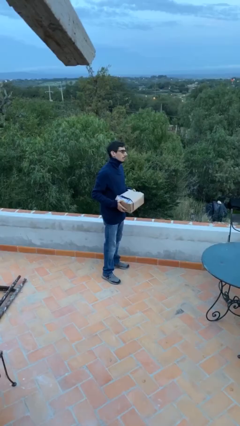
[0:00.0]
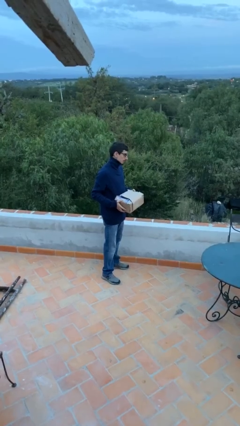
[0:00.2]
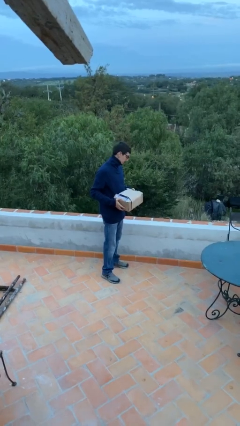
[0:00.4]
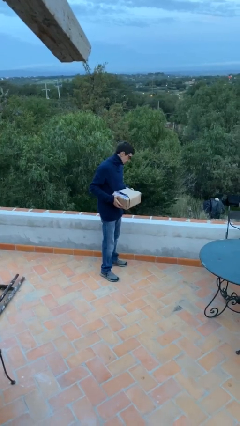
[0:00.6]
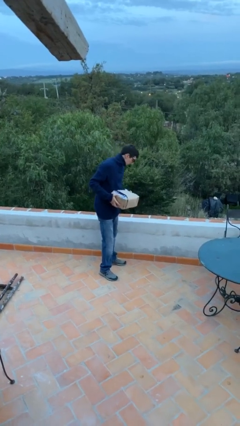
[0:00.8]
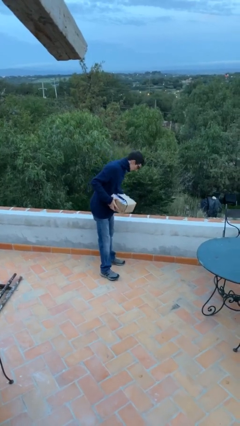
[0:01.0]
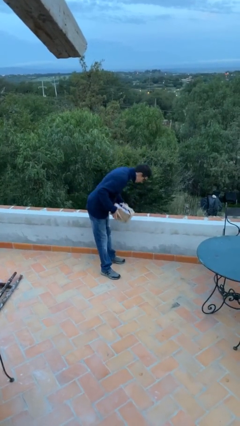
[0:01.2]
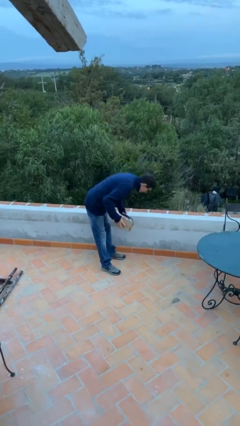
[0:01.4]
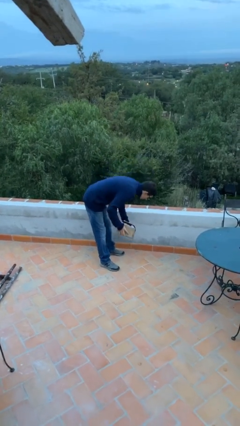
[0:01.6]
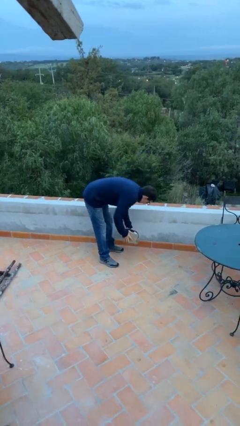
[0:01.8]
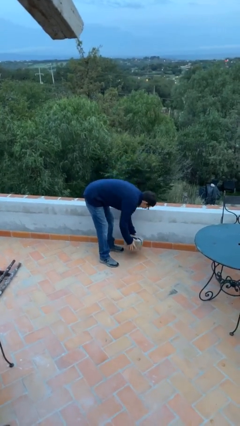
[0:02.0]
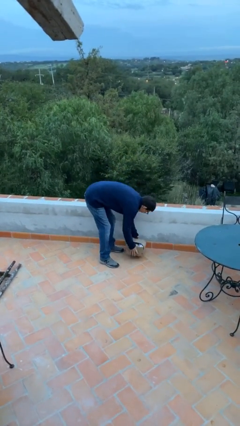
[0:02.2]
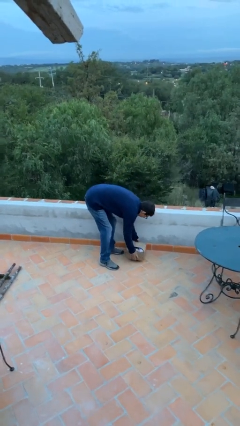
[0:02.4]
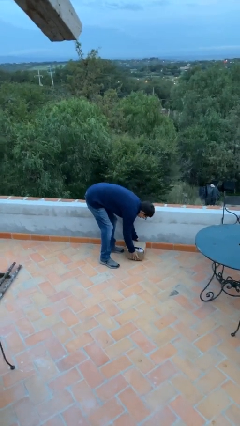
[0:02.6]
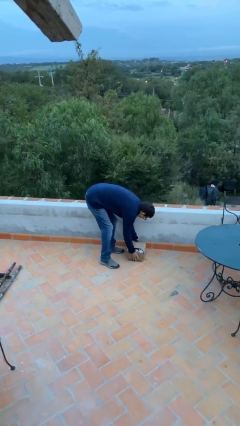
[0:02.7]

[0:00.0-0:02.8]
person puts down object on floor

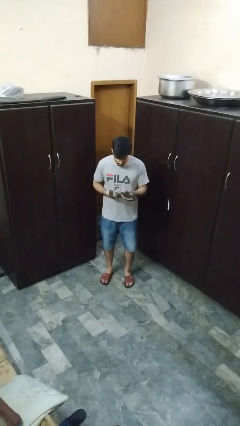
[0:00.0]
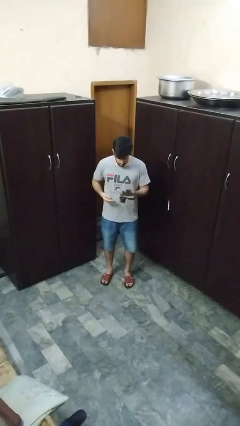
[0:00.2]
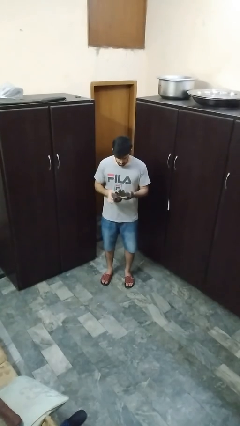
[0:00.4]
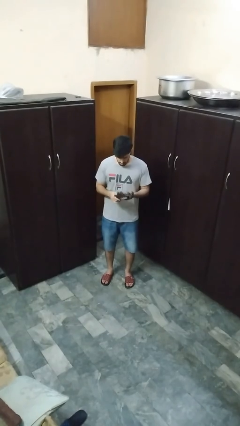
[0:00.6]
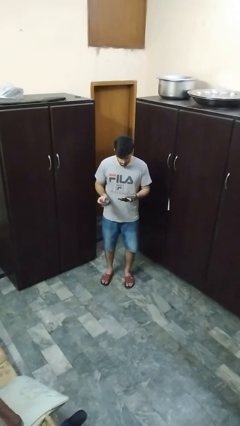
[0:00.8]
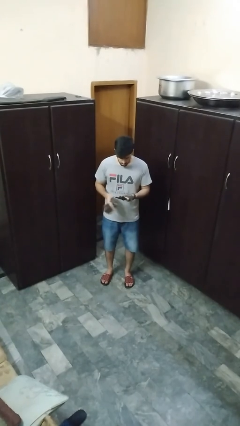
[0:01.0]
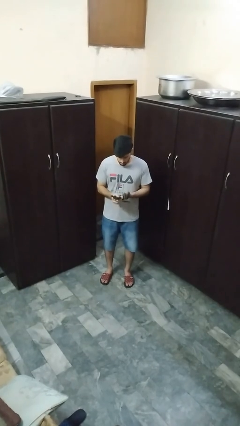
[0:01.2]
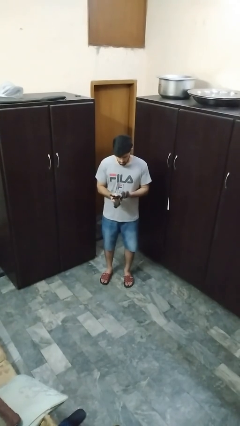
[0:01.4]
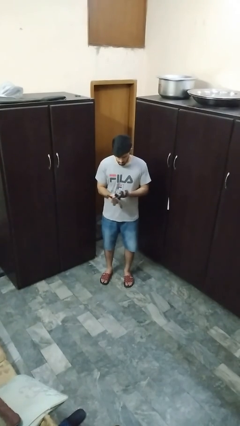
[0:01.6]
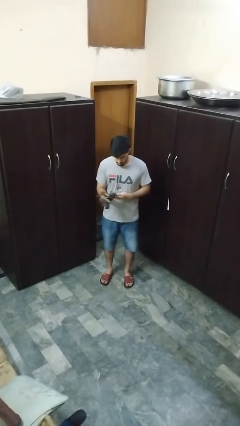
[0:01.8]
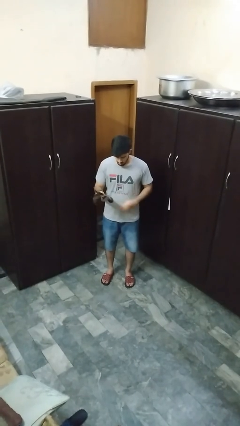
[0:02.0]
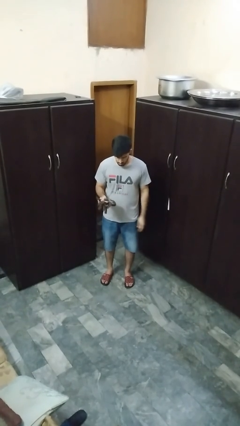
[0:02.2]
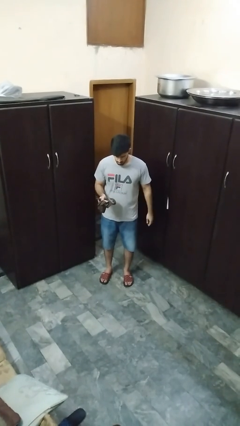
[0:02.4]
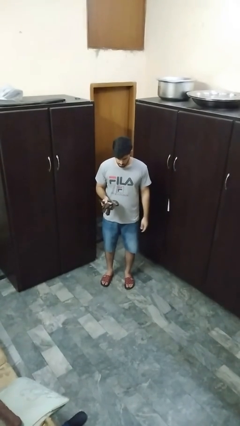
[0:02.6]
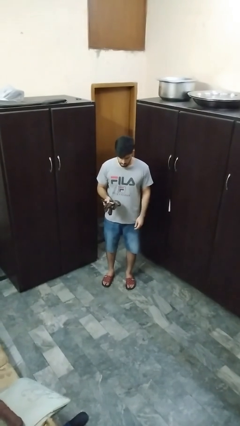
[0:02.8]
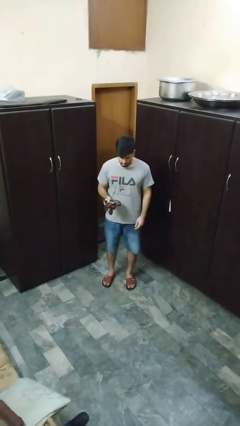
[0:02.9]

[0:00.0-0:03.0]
person takes off gloves

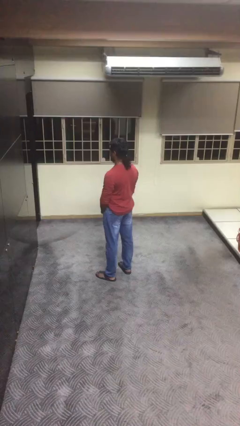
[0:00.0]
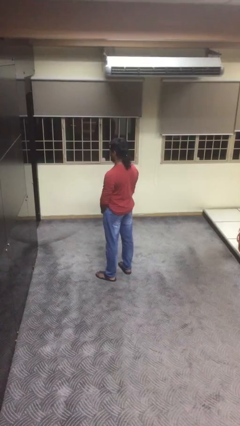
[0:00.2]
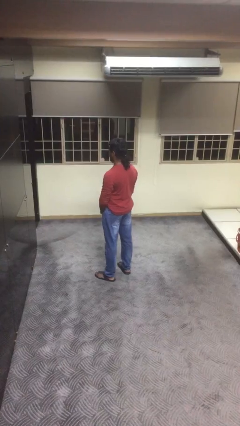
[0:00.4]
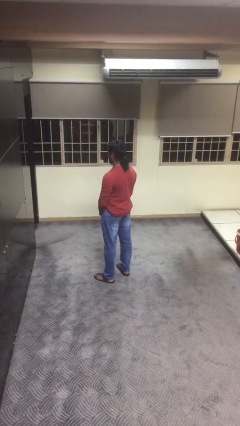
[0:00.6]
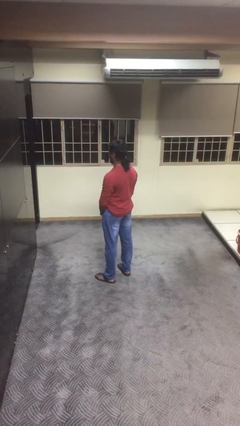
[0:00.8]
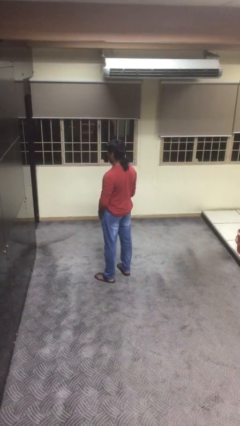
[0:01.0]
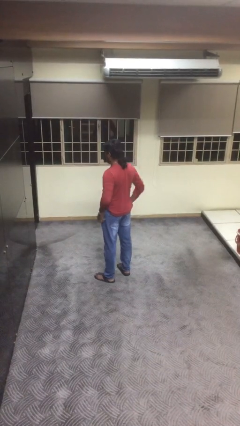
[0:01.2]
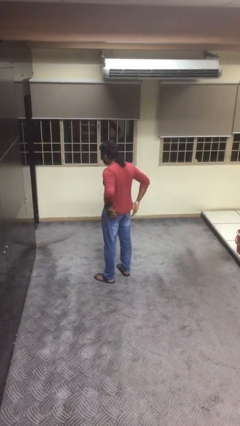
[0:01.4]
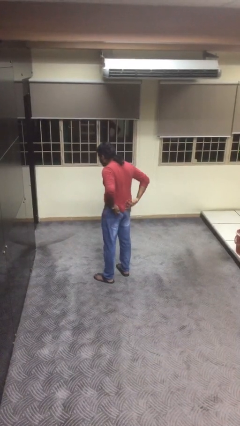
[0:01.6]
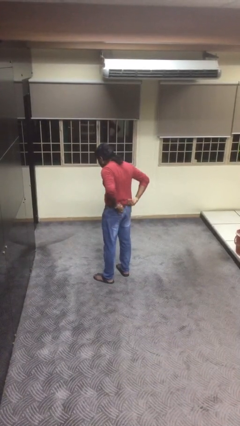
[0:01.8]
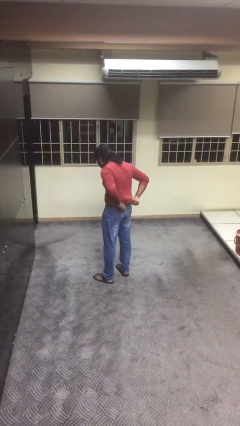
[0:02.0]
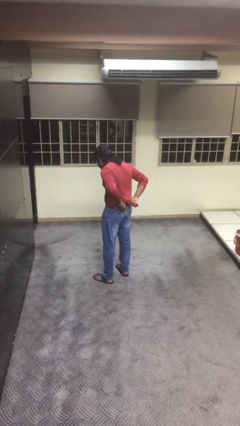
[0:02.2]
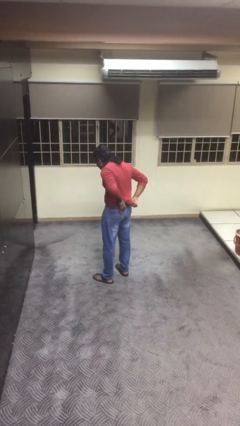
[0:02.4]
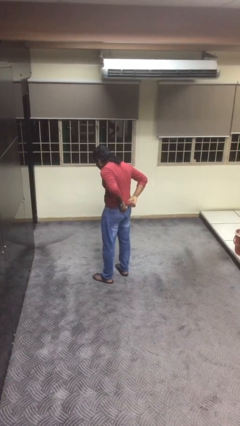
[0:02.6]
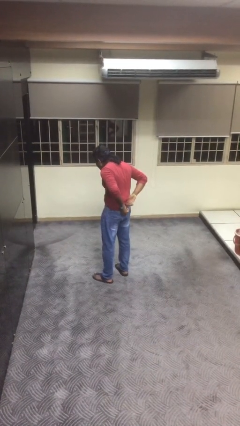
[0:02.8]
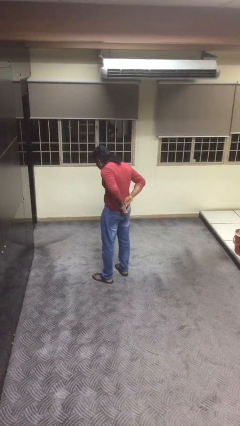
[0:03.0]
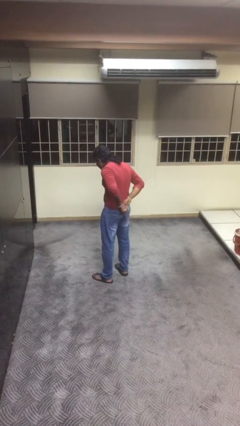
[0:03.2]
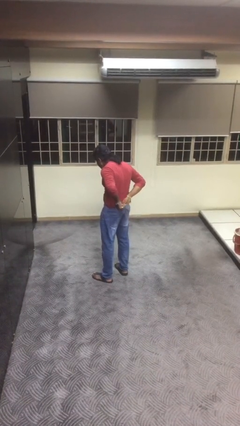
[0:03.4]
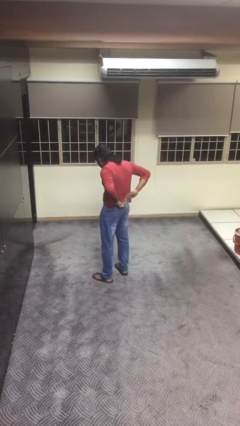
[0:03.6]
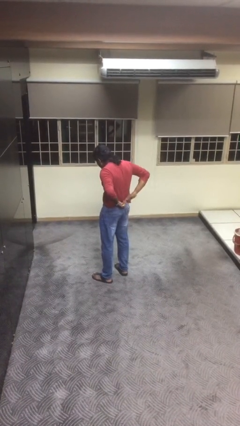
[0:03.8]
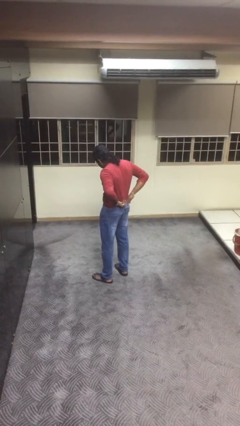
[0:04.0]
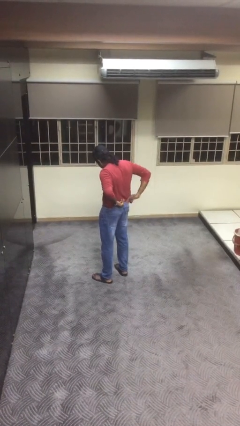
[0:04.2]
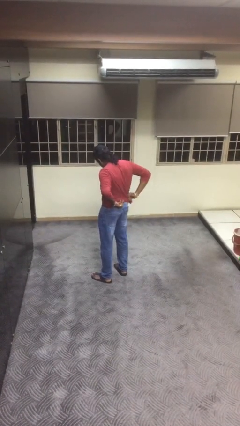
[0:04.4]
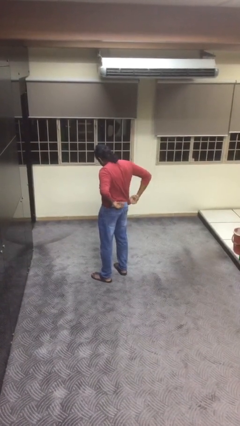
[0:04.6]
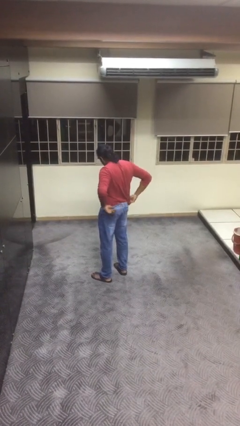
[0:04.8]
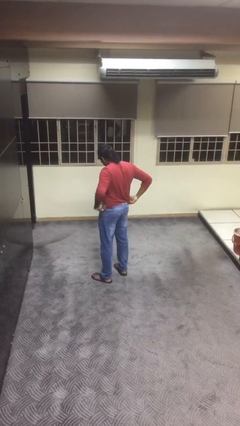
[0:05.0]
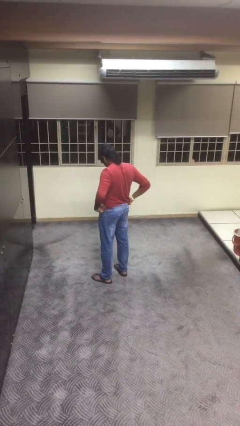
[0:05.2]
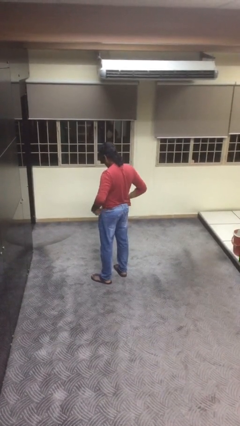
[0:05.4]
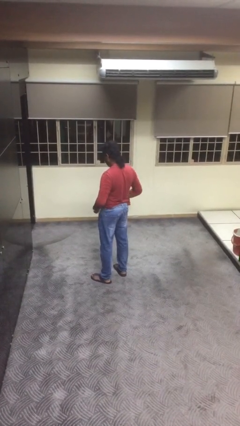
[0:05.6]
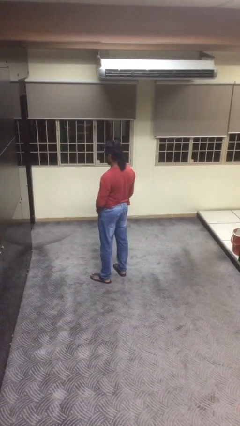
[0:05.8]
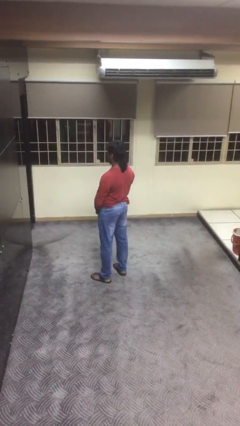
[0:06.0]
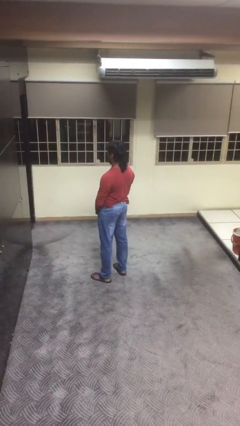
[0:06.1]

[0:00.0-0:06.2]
person tucks in shirt

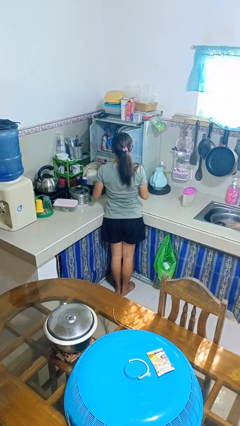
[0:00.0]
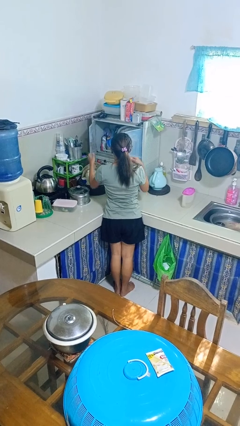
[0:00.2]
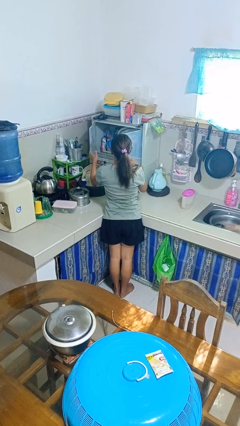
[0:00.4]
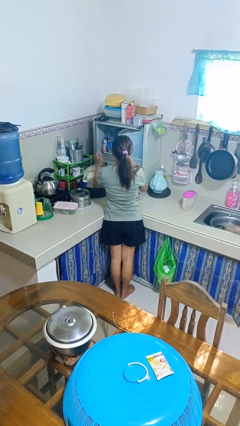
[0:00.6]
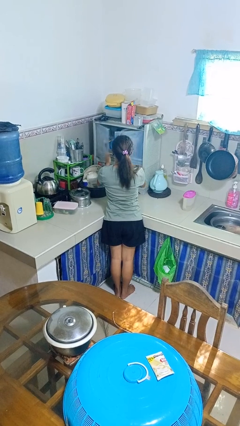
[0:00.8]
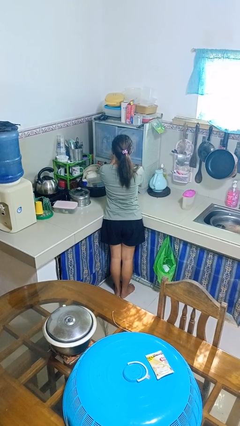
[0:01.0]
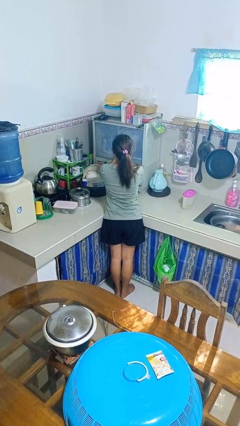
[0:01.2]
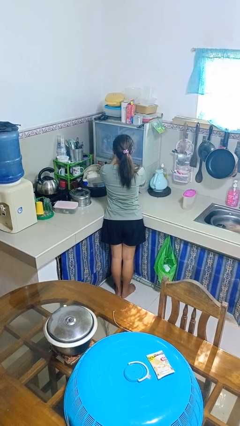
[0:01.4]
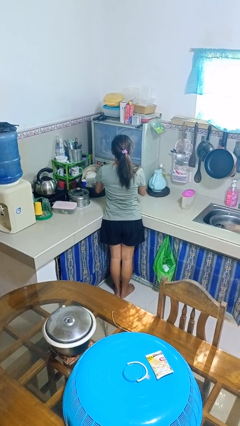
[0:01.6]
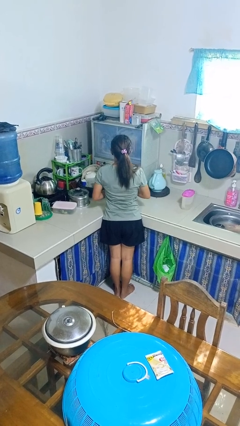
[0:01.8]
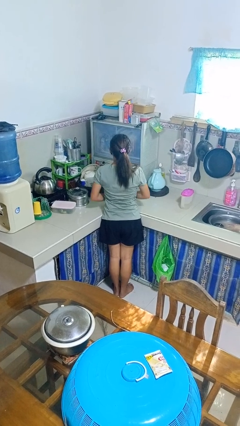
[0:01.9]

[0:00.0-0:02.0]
person closes kitchen drawer

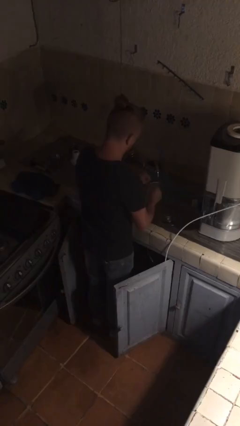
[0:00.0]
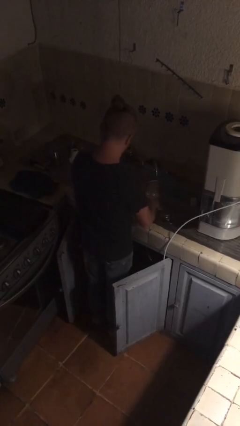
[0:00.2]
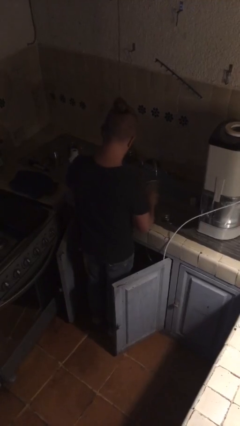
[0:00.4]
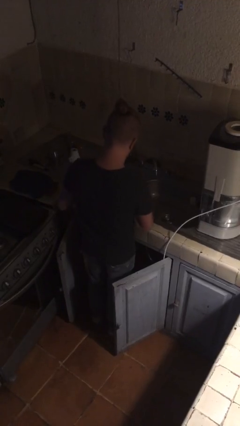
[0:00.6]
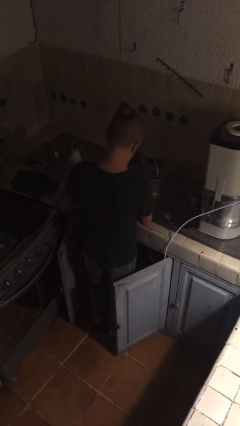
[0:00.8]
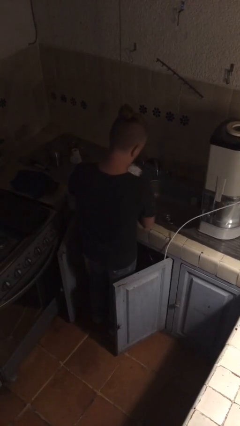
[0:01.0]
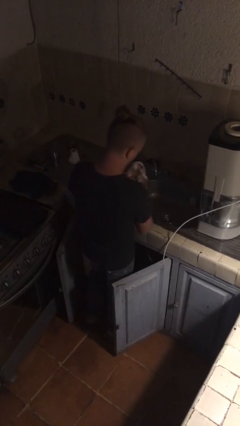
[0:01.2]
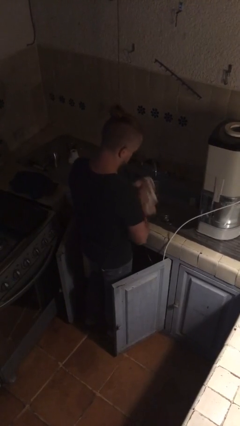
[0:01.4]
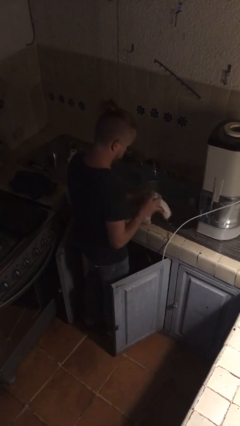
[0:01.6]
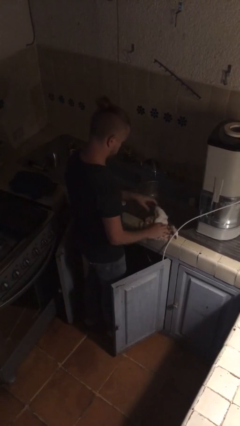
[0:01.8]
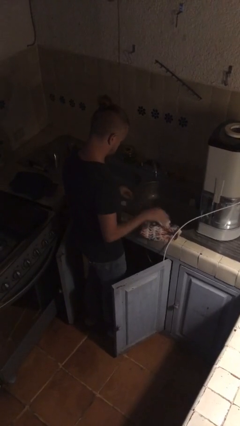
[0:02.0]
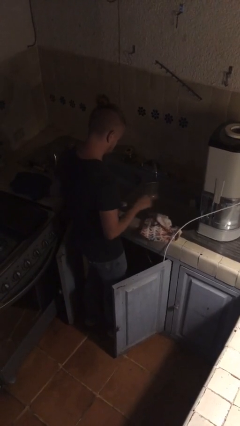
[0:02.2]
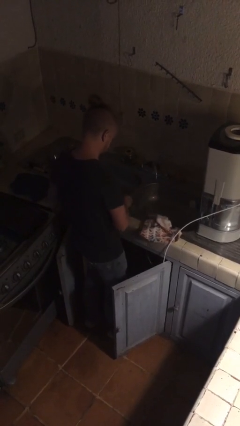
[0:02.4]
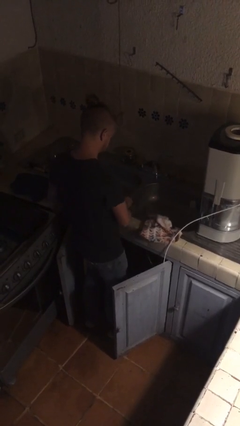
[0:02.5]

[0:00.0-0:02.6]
person dries hands with towel
